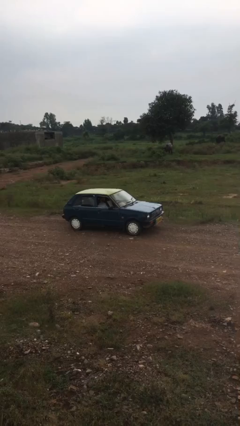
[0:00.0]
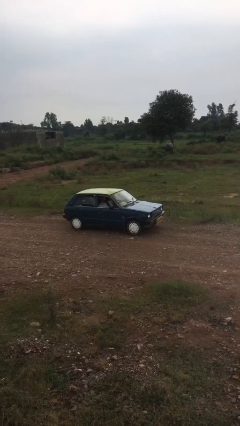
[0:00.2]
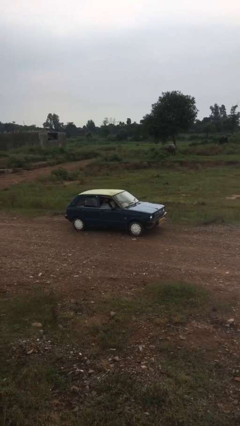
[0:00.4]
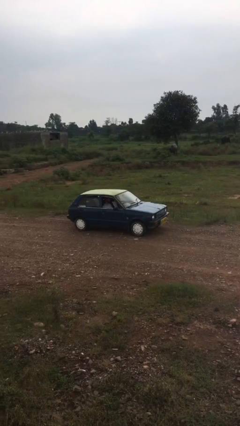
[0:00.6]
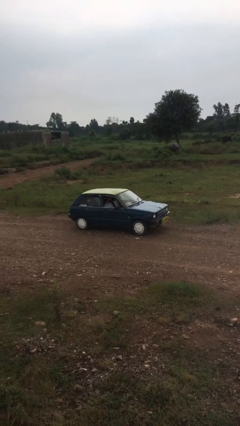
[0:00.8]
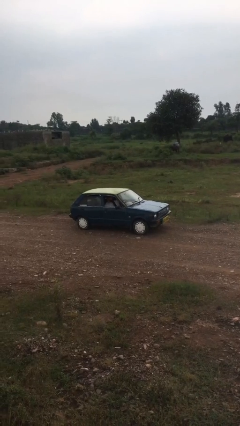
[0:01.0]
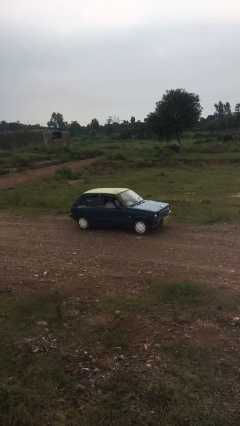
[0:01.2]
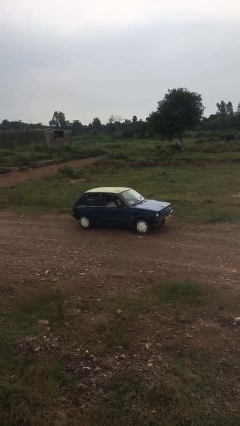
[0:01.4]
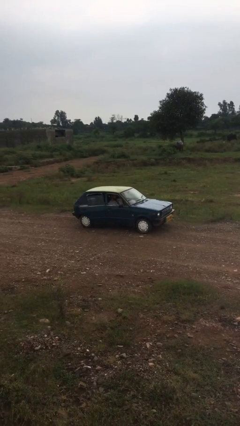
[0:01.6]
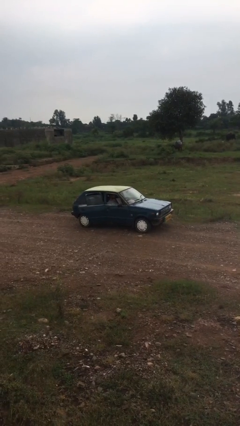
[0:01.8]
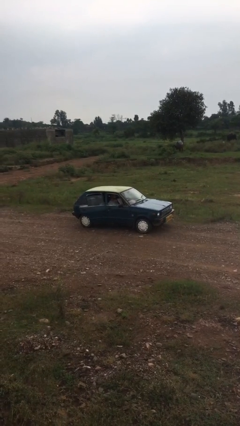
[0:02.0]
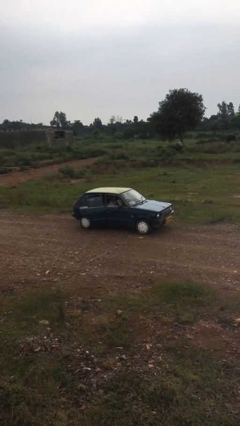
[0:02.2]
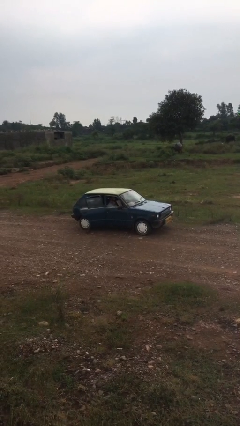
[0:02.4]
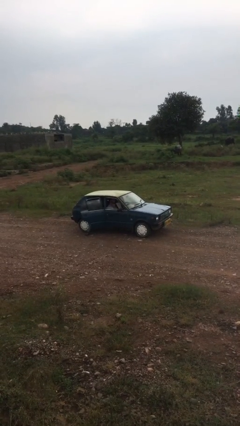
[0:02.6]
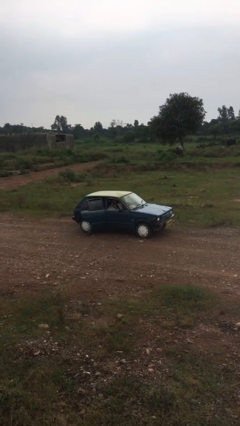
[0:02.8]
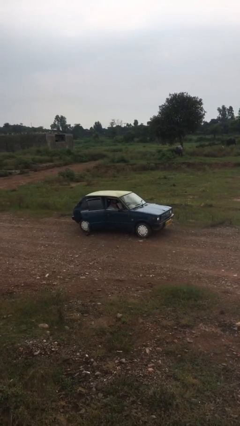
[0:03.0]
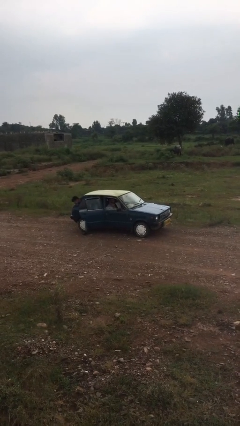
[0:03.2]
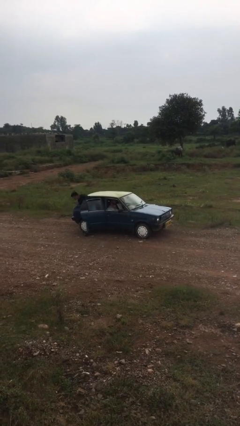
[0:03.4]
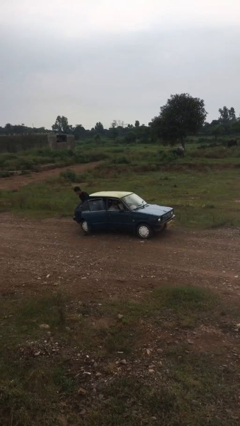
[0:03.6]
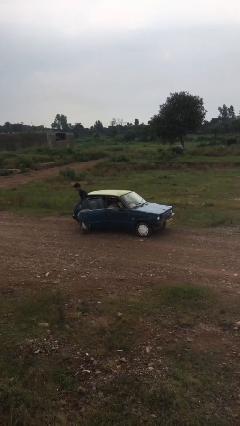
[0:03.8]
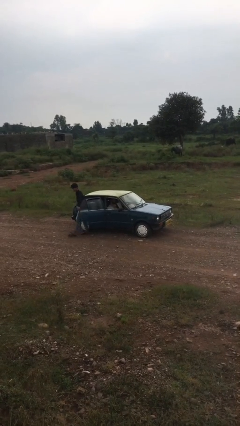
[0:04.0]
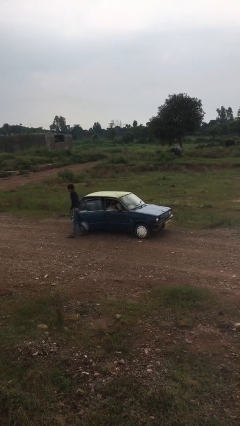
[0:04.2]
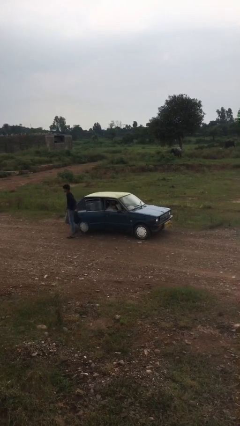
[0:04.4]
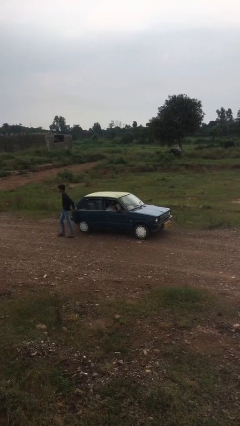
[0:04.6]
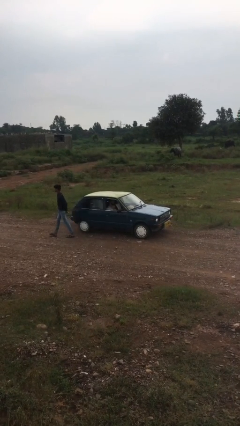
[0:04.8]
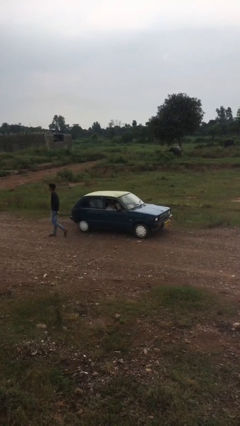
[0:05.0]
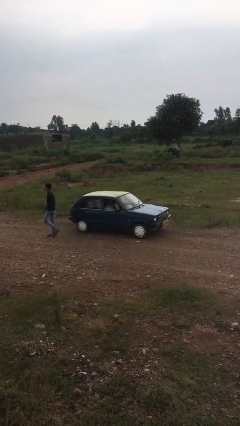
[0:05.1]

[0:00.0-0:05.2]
car drops off person

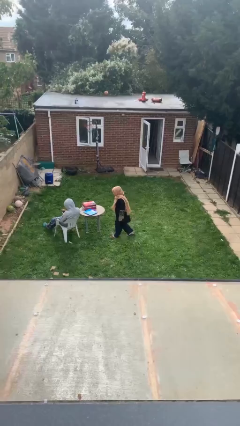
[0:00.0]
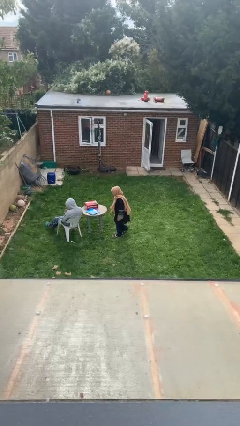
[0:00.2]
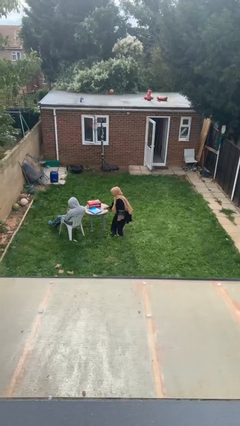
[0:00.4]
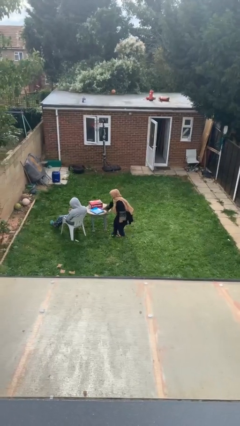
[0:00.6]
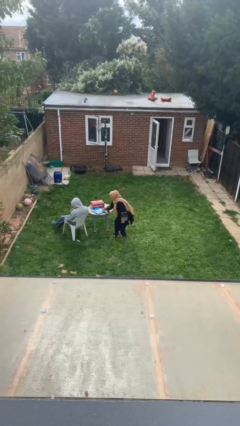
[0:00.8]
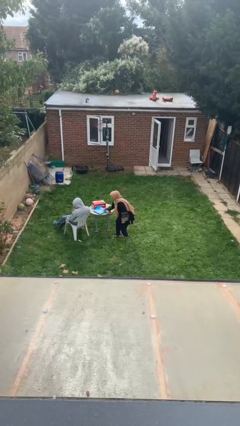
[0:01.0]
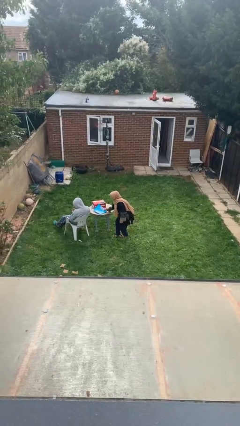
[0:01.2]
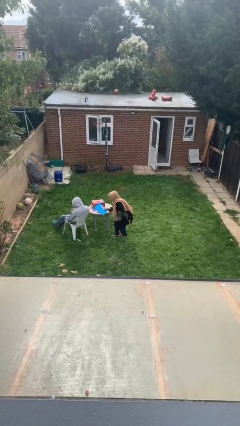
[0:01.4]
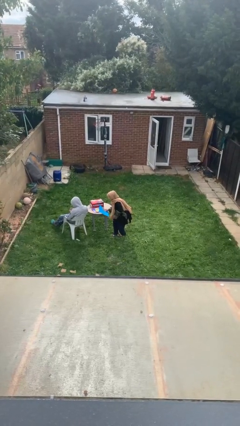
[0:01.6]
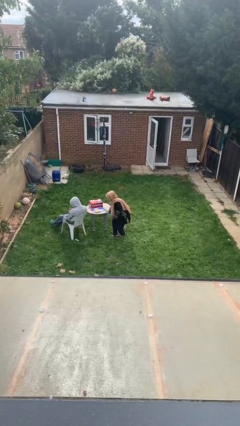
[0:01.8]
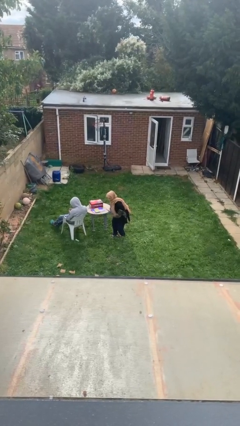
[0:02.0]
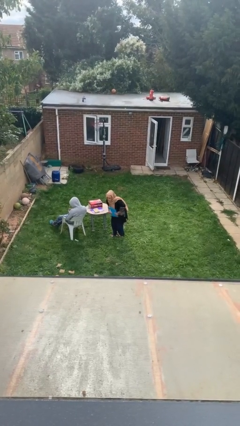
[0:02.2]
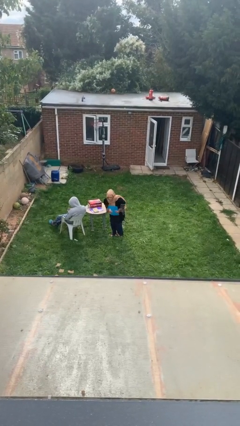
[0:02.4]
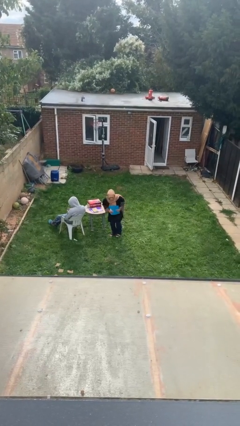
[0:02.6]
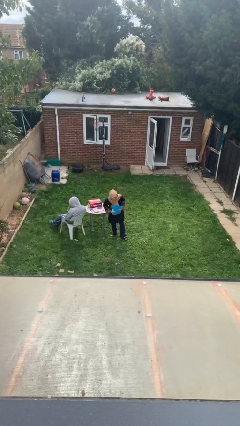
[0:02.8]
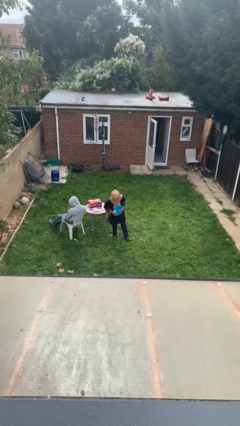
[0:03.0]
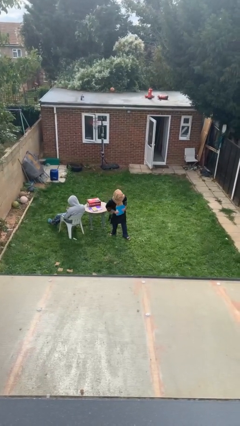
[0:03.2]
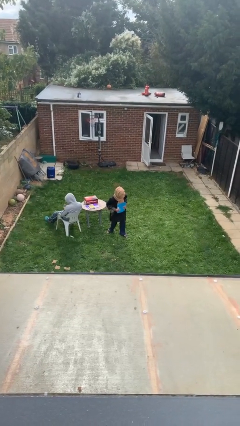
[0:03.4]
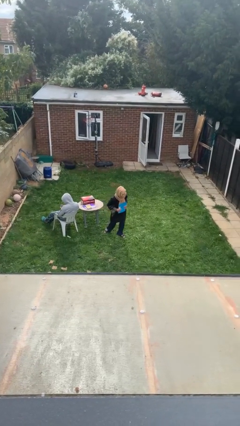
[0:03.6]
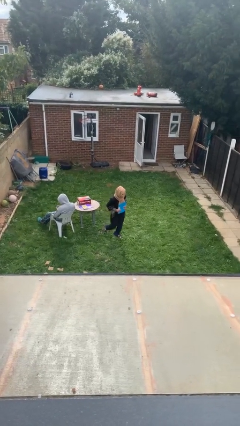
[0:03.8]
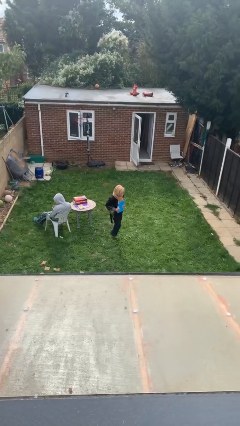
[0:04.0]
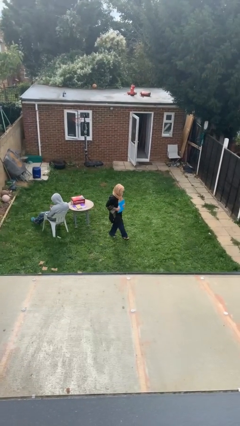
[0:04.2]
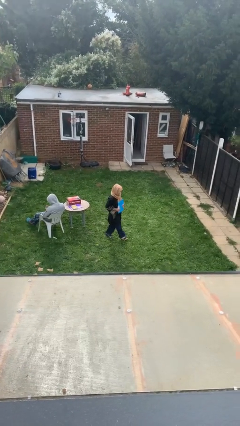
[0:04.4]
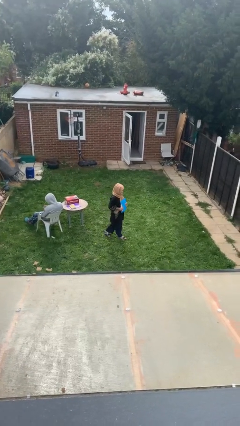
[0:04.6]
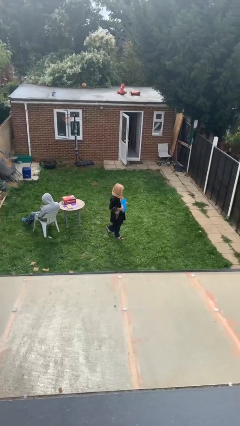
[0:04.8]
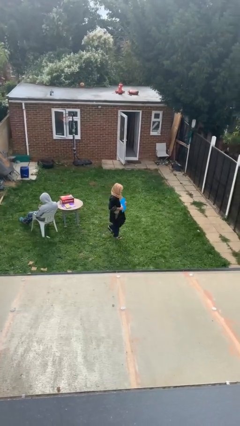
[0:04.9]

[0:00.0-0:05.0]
person steals object from person

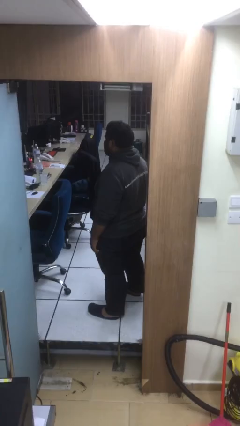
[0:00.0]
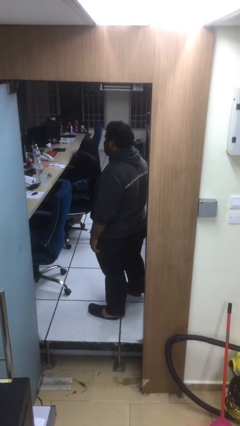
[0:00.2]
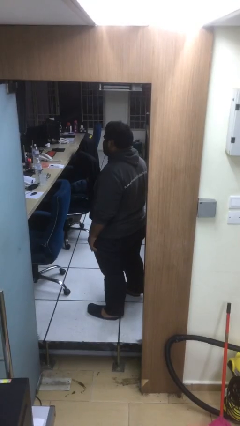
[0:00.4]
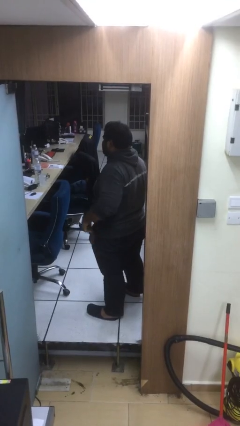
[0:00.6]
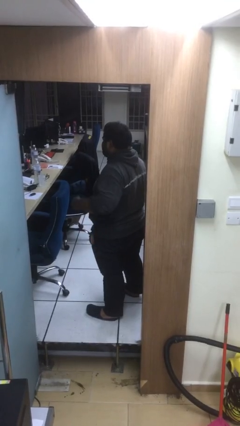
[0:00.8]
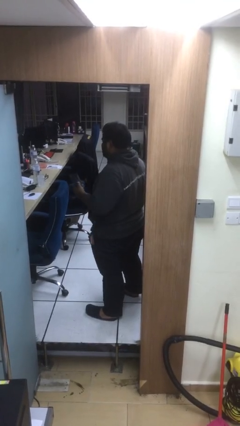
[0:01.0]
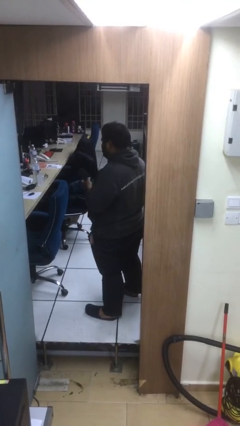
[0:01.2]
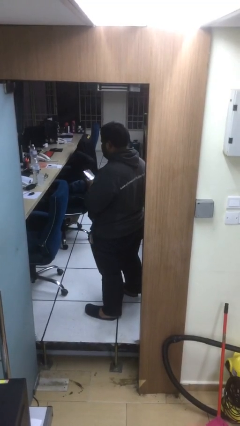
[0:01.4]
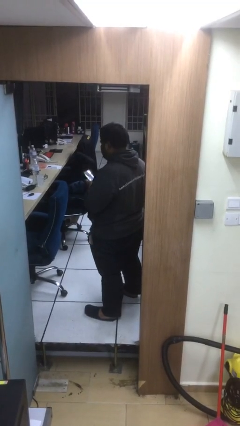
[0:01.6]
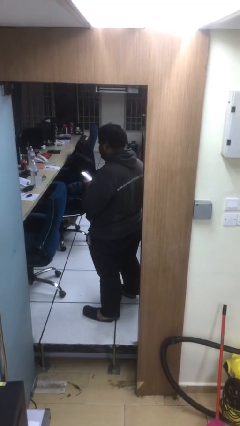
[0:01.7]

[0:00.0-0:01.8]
person takes phone from pocket

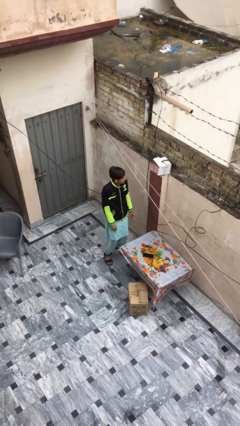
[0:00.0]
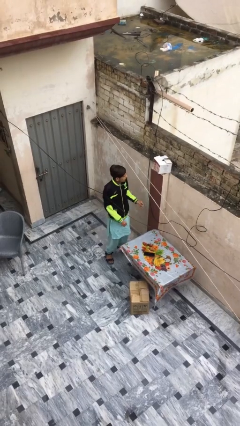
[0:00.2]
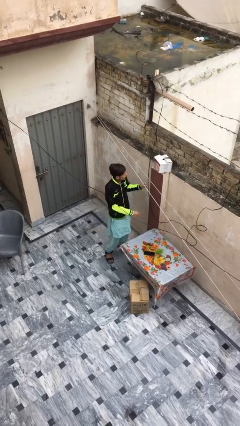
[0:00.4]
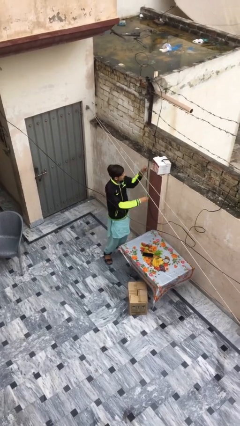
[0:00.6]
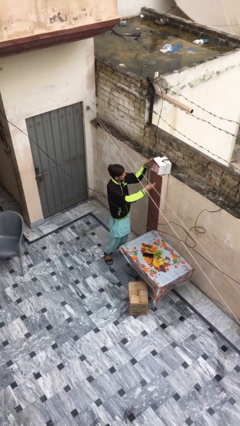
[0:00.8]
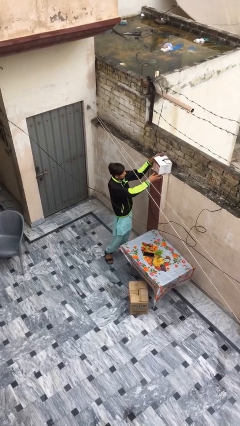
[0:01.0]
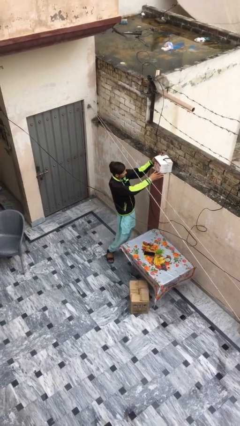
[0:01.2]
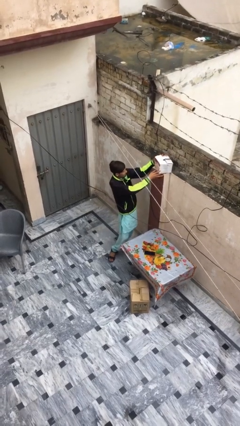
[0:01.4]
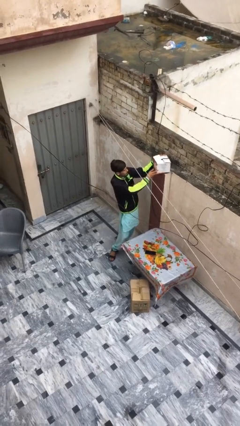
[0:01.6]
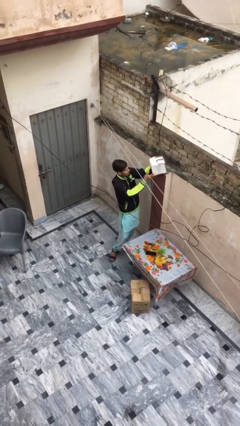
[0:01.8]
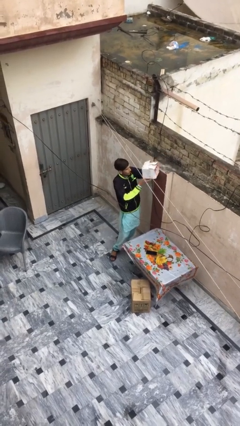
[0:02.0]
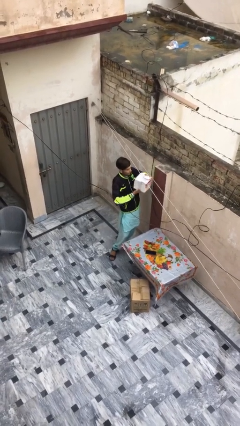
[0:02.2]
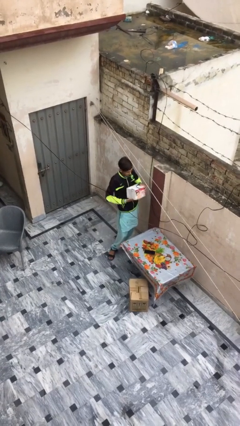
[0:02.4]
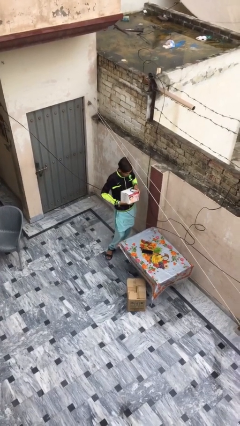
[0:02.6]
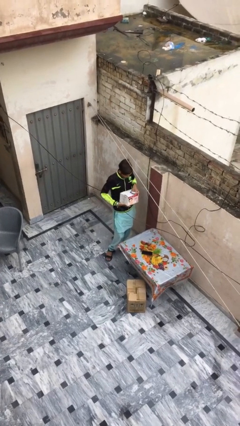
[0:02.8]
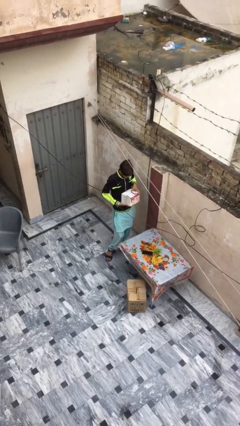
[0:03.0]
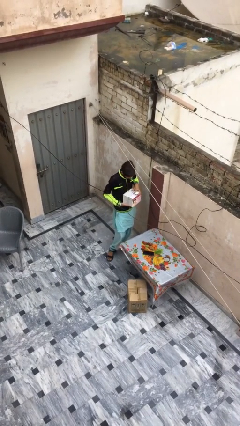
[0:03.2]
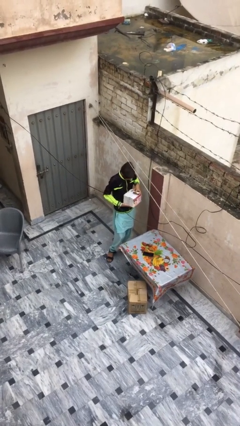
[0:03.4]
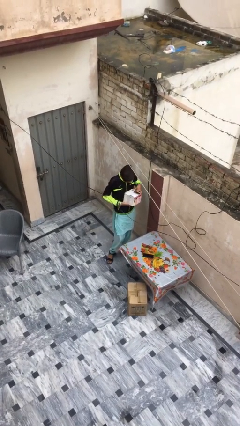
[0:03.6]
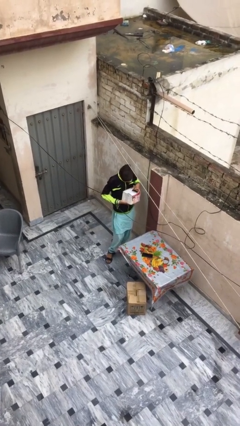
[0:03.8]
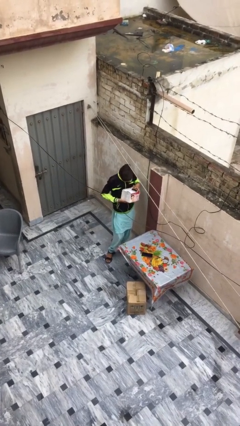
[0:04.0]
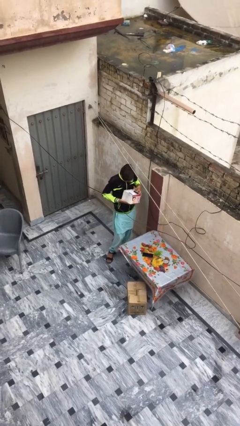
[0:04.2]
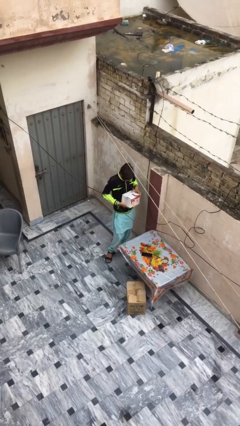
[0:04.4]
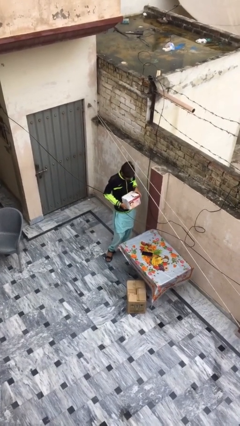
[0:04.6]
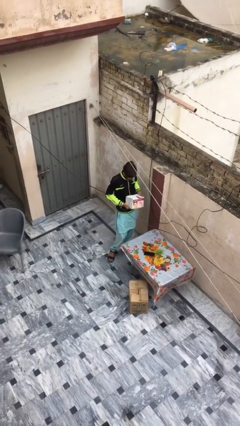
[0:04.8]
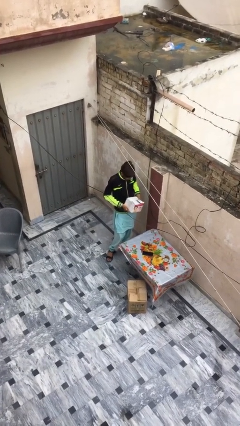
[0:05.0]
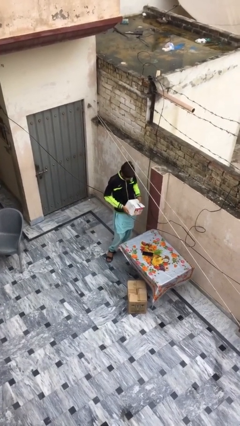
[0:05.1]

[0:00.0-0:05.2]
person picks up object from shelf

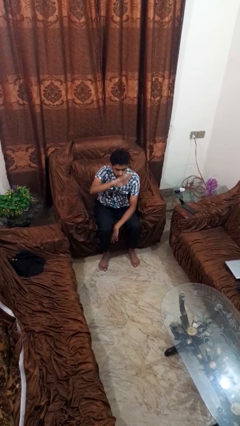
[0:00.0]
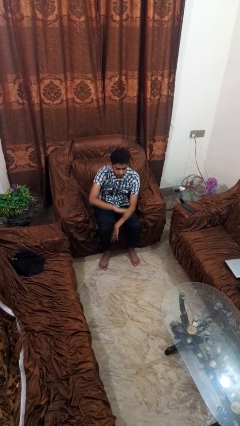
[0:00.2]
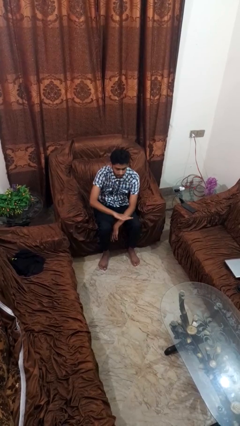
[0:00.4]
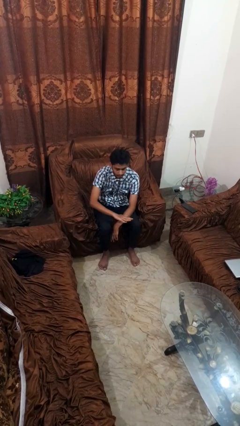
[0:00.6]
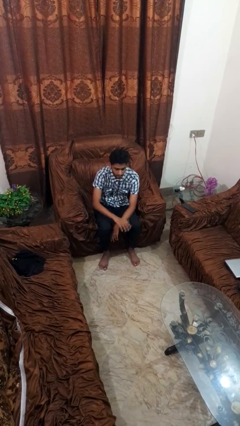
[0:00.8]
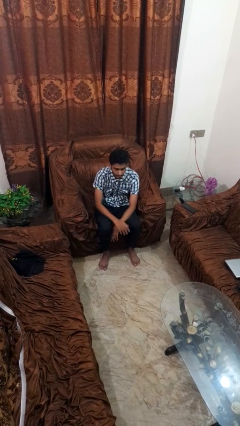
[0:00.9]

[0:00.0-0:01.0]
person gestures swipe down
